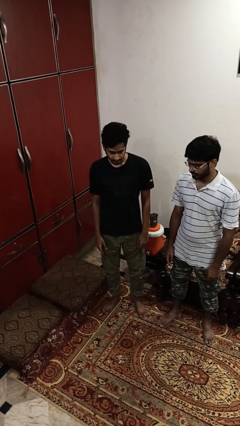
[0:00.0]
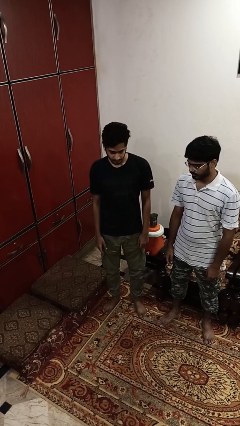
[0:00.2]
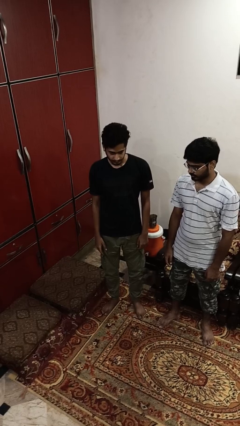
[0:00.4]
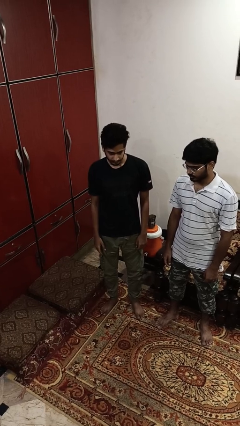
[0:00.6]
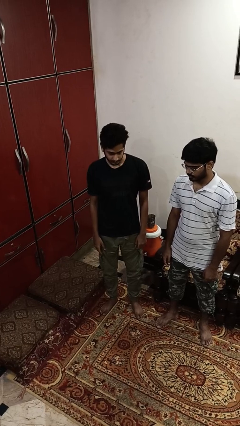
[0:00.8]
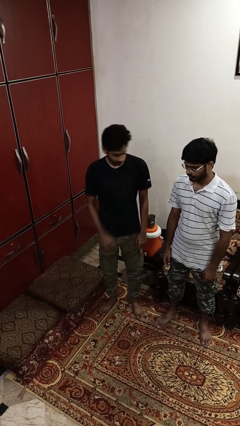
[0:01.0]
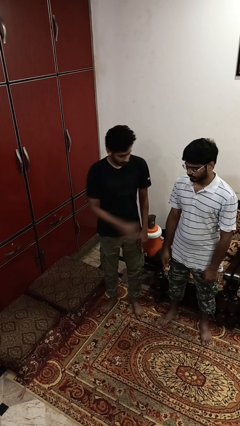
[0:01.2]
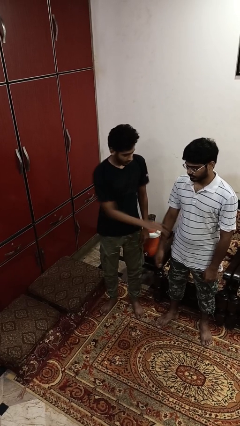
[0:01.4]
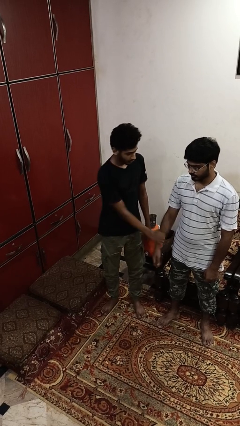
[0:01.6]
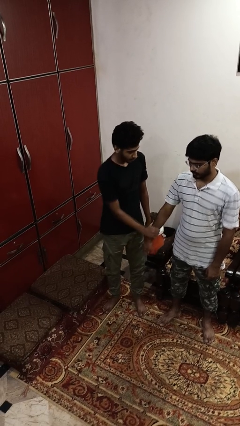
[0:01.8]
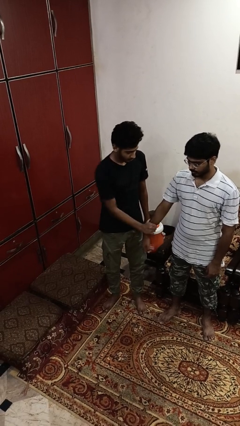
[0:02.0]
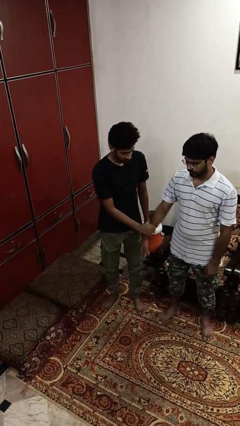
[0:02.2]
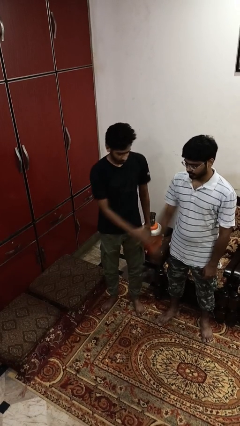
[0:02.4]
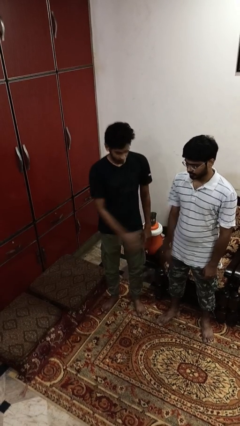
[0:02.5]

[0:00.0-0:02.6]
person grabs person by forearm

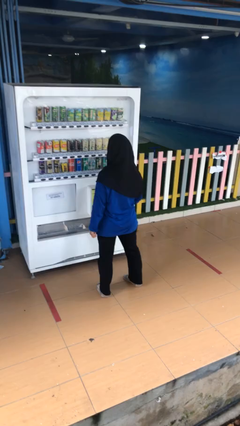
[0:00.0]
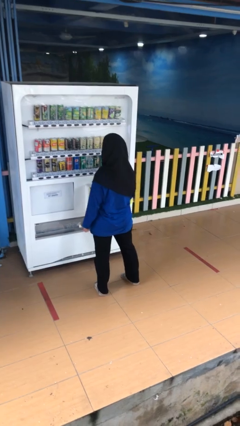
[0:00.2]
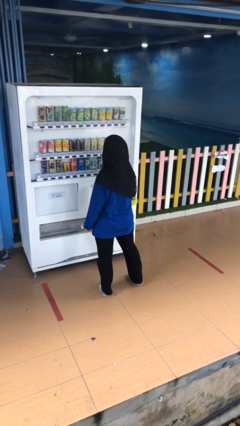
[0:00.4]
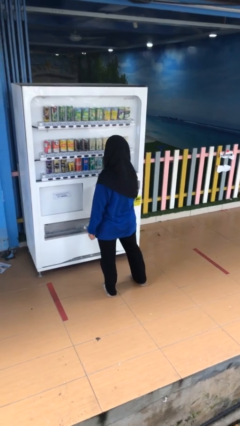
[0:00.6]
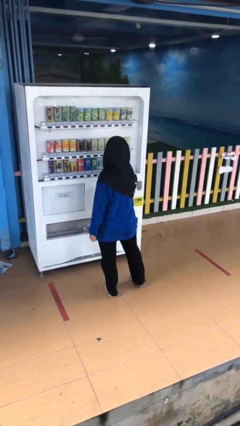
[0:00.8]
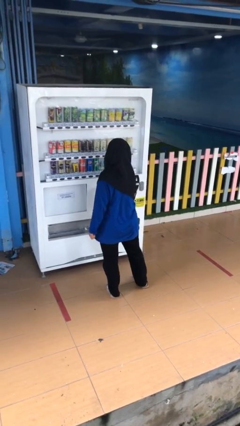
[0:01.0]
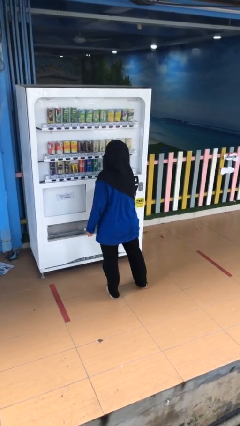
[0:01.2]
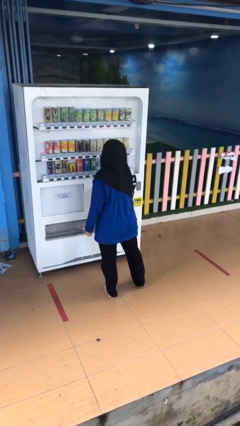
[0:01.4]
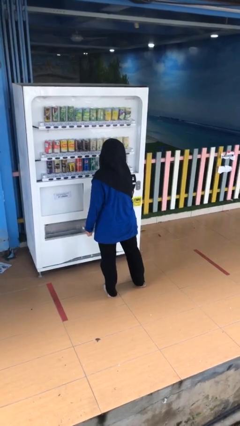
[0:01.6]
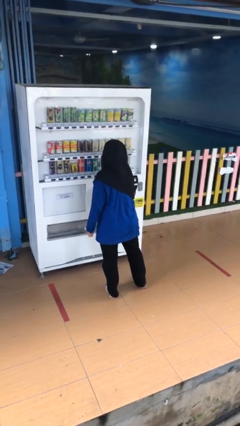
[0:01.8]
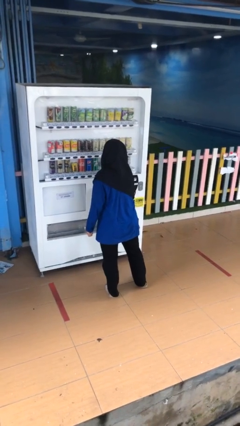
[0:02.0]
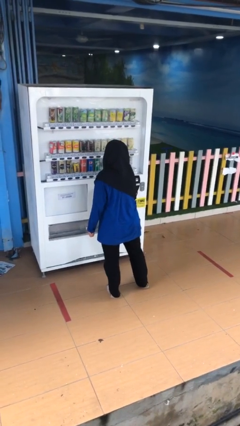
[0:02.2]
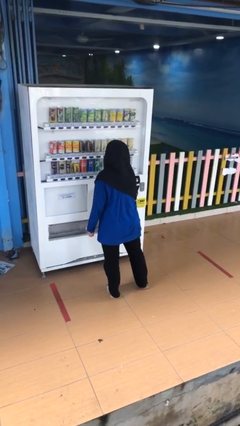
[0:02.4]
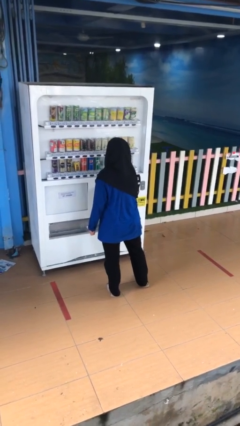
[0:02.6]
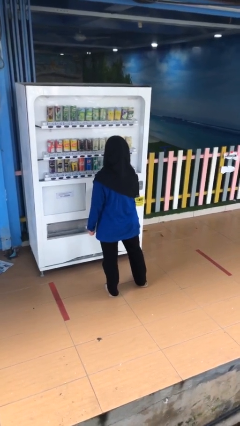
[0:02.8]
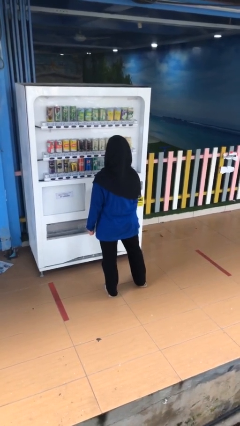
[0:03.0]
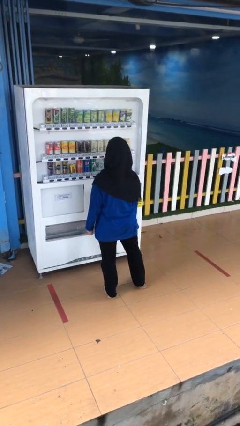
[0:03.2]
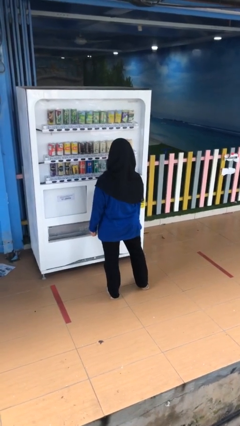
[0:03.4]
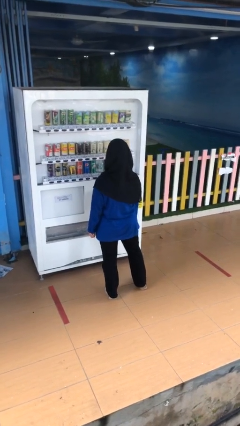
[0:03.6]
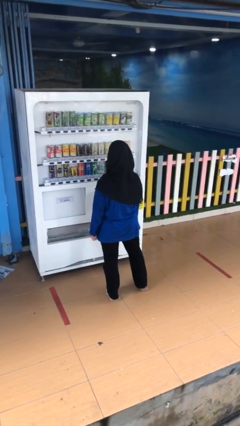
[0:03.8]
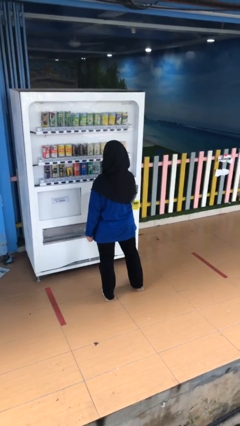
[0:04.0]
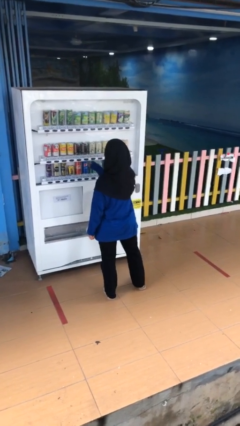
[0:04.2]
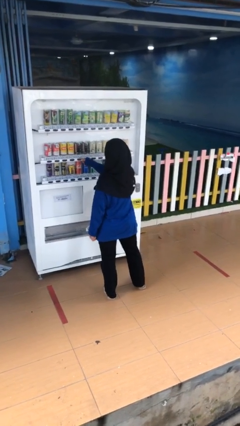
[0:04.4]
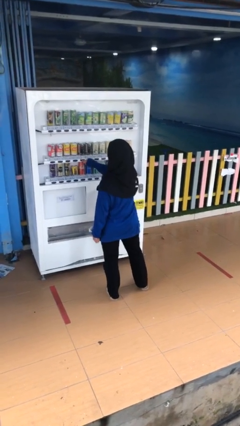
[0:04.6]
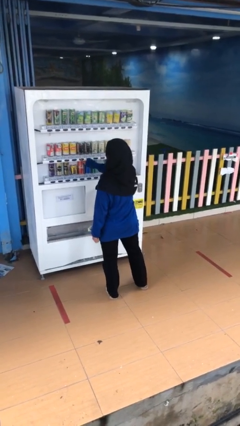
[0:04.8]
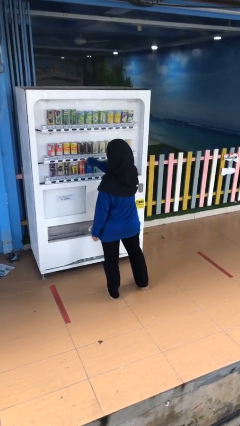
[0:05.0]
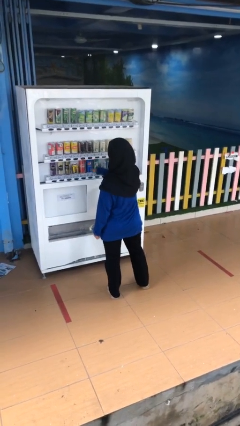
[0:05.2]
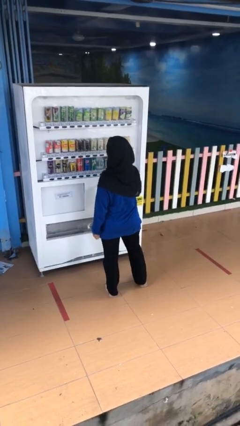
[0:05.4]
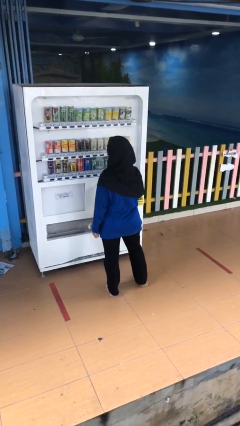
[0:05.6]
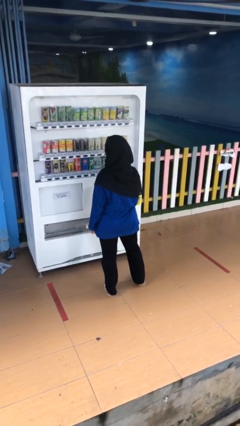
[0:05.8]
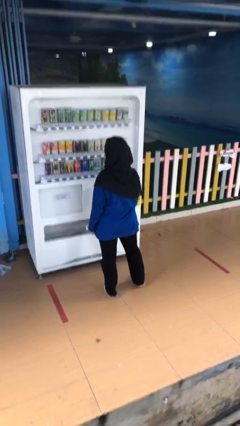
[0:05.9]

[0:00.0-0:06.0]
person purchases from machine

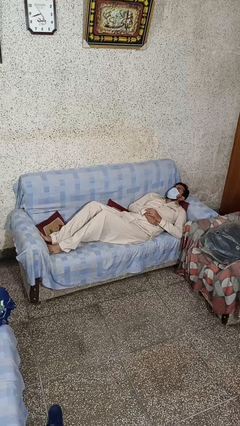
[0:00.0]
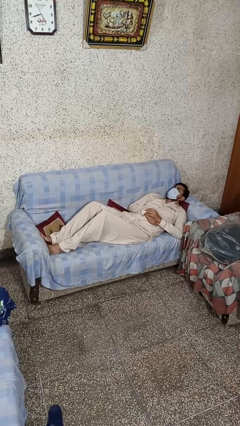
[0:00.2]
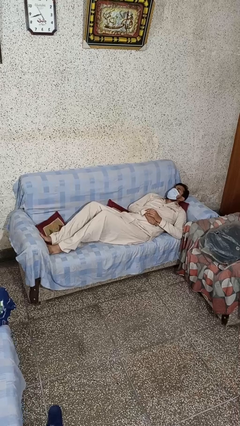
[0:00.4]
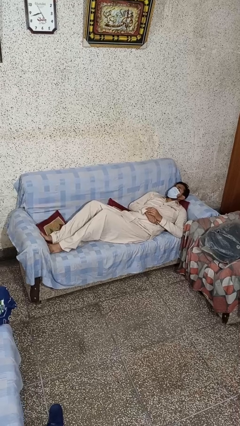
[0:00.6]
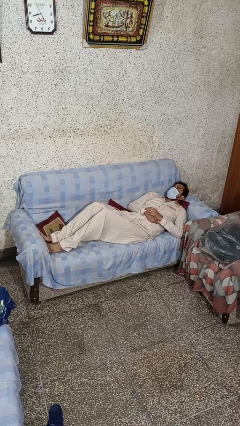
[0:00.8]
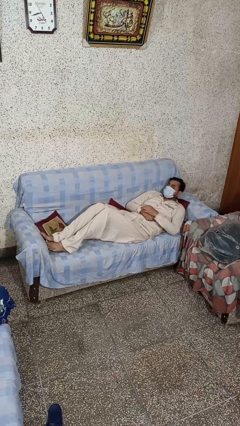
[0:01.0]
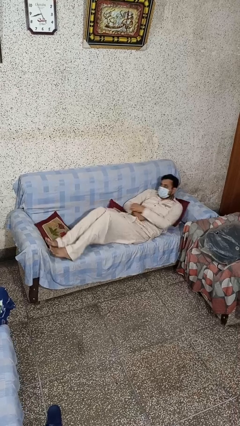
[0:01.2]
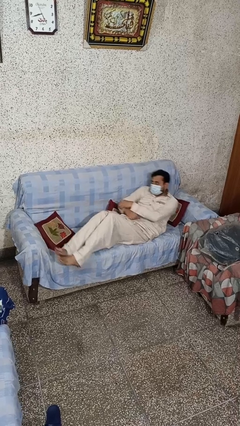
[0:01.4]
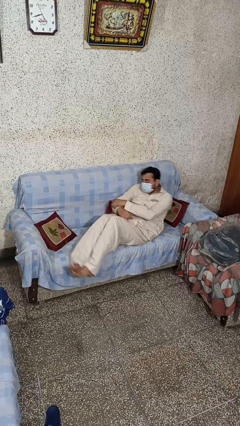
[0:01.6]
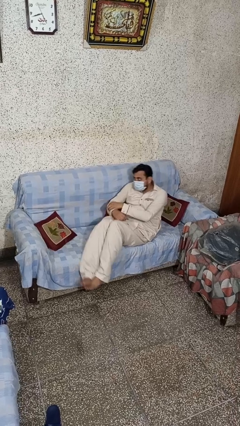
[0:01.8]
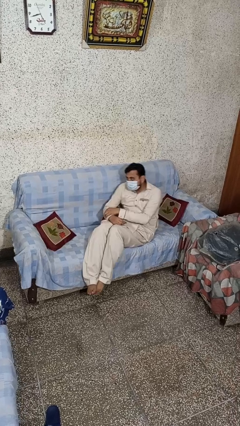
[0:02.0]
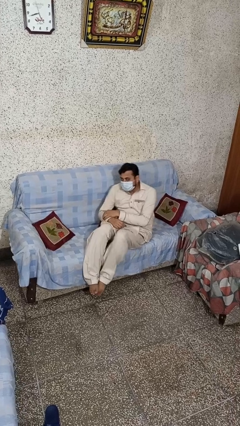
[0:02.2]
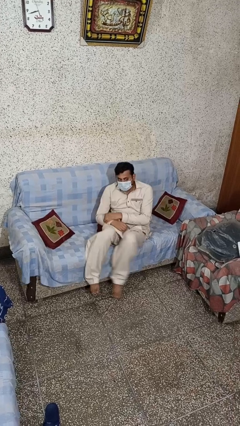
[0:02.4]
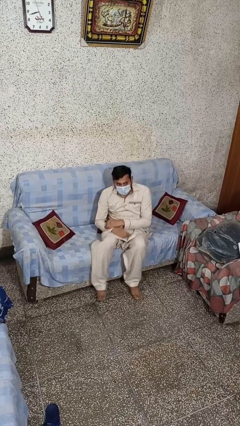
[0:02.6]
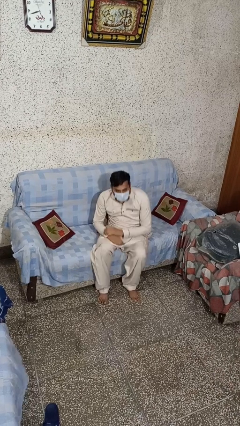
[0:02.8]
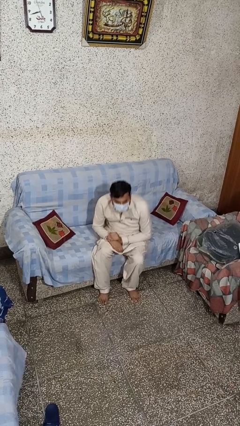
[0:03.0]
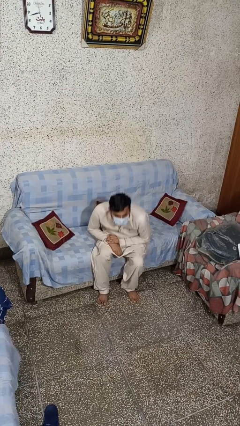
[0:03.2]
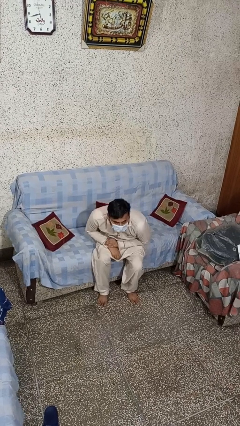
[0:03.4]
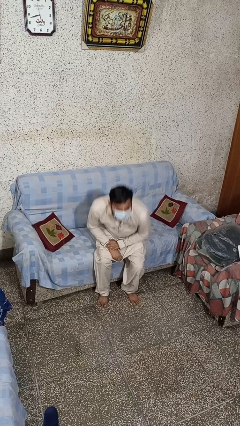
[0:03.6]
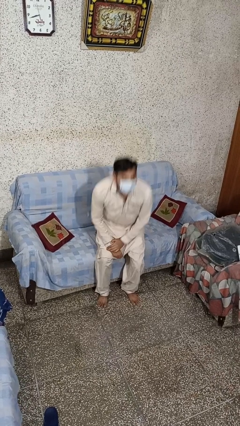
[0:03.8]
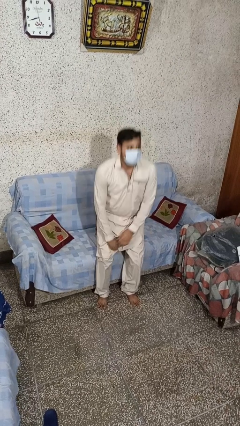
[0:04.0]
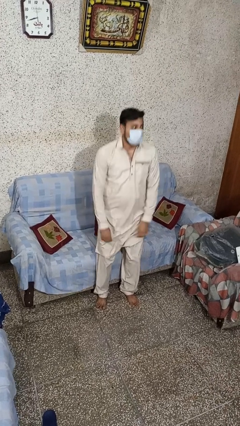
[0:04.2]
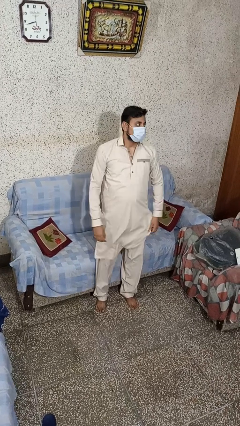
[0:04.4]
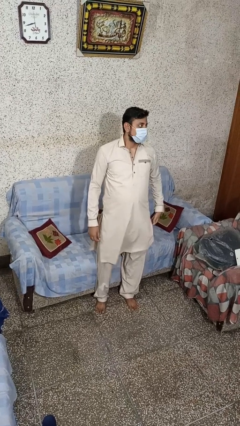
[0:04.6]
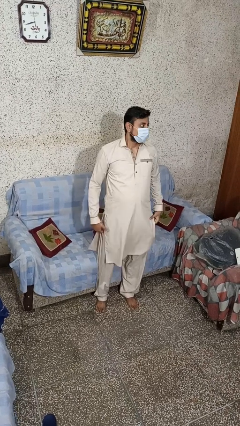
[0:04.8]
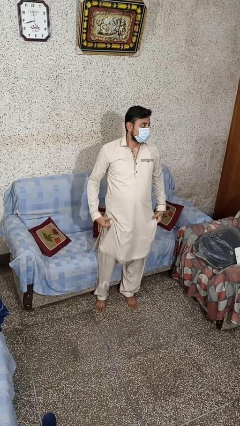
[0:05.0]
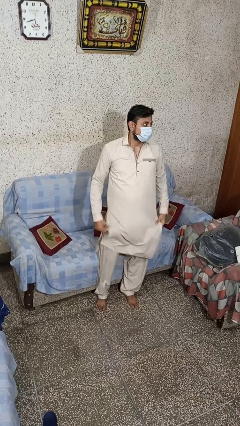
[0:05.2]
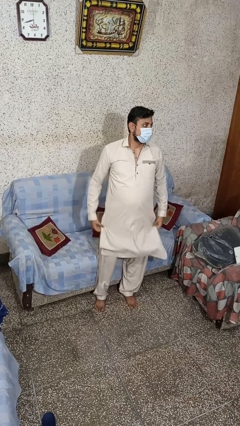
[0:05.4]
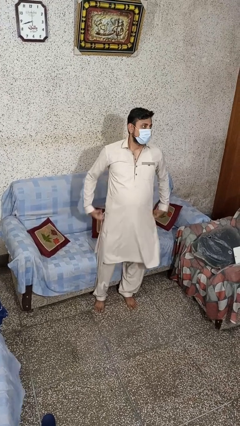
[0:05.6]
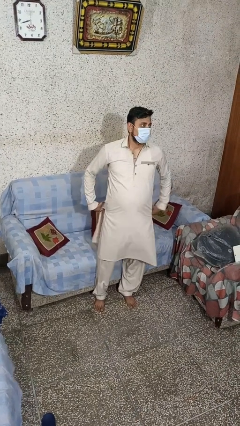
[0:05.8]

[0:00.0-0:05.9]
person stands up

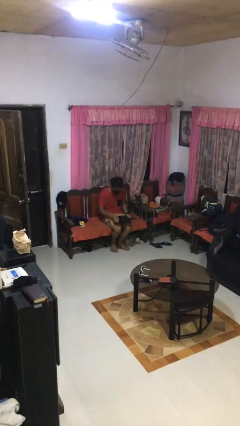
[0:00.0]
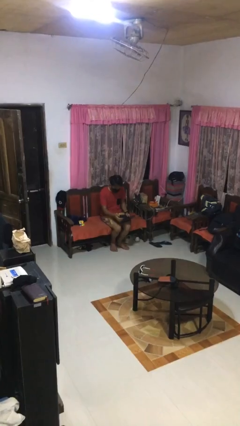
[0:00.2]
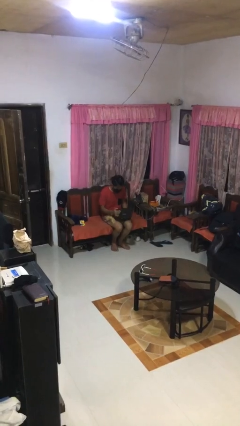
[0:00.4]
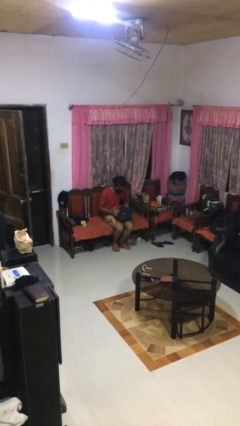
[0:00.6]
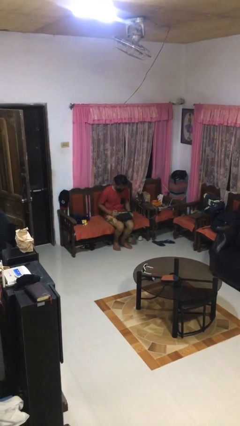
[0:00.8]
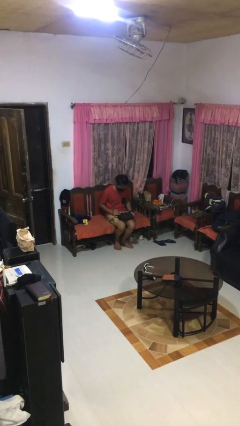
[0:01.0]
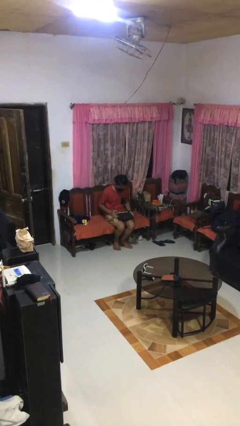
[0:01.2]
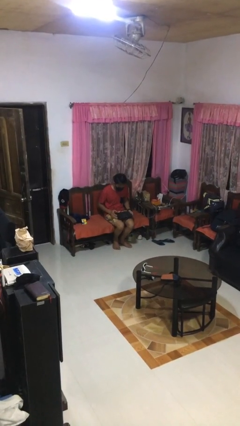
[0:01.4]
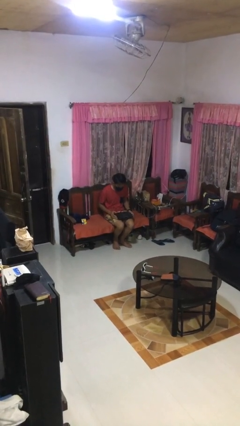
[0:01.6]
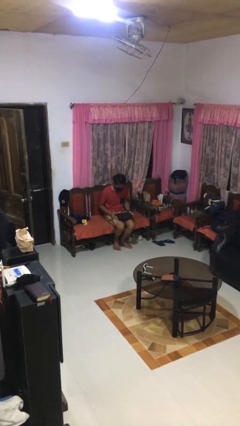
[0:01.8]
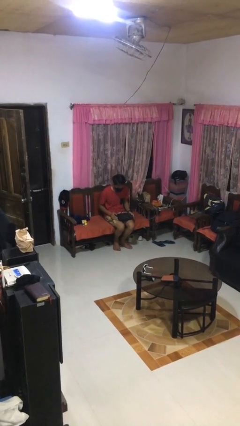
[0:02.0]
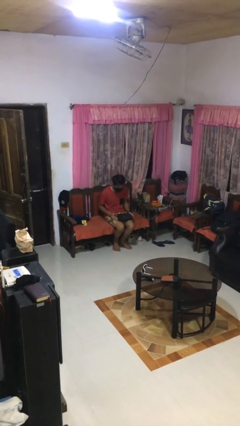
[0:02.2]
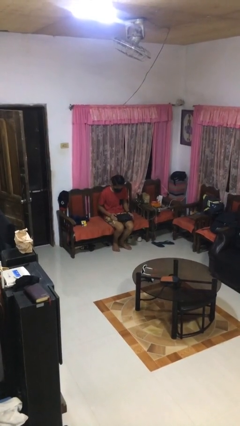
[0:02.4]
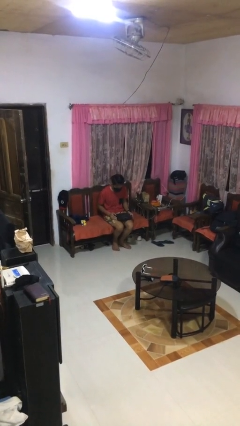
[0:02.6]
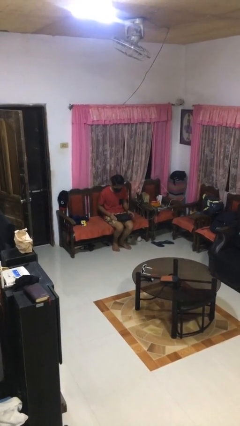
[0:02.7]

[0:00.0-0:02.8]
person closes laptop
